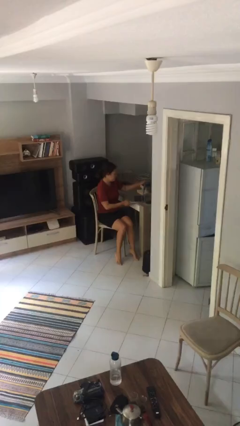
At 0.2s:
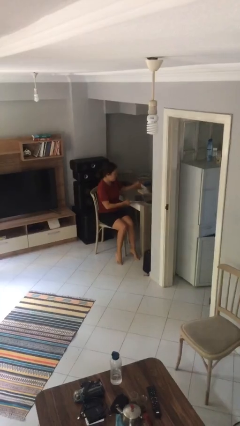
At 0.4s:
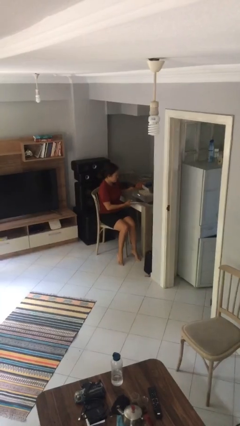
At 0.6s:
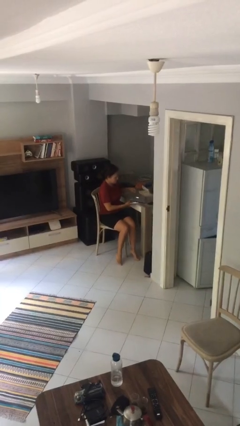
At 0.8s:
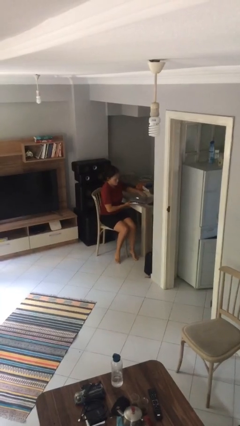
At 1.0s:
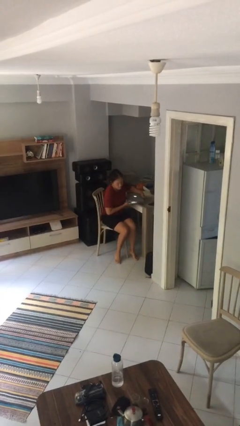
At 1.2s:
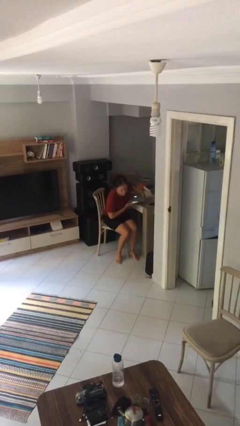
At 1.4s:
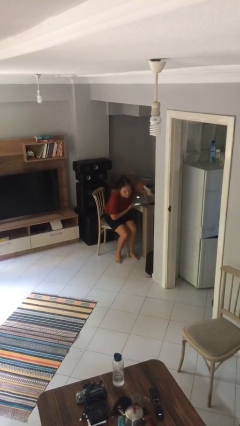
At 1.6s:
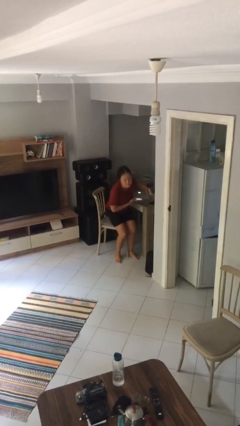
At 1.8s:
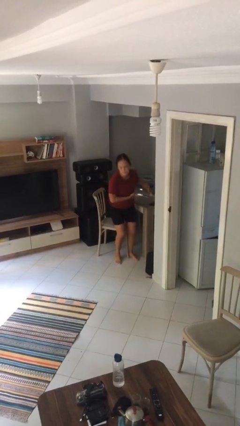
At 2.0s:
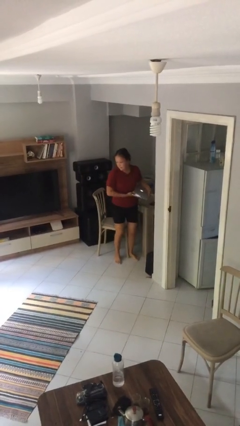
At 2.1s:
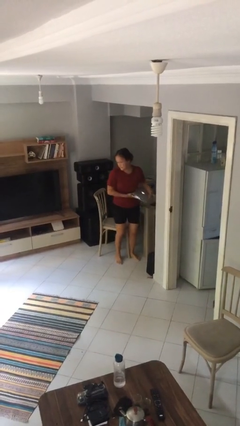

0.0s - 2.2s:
person stands up

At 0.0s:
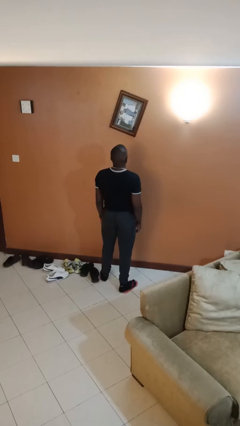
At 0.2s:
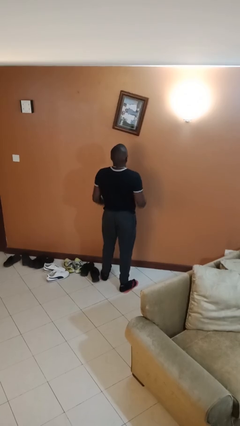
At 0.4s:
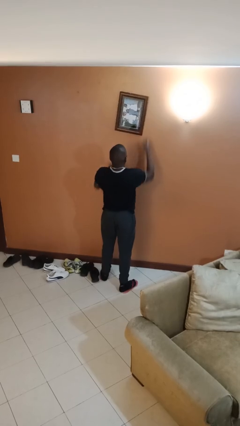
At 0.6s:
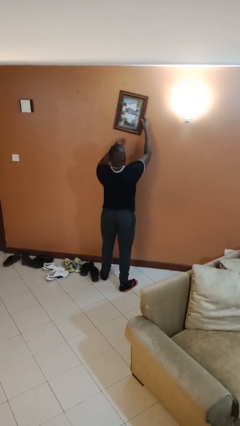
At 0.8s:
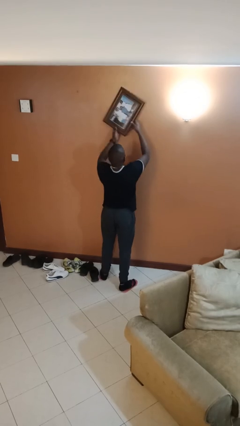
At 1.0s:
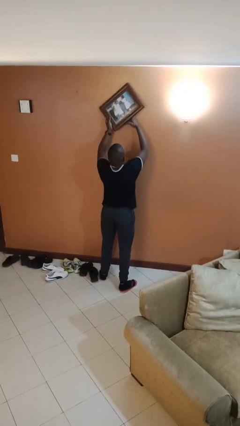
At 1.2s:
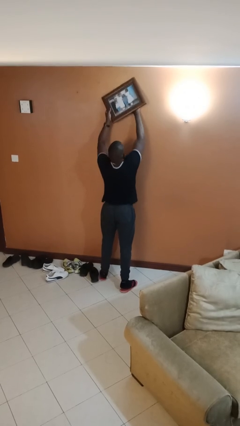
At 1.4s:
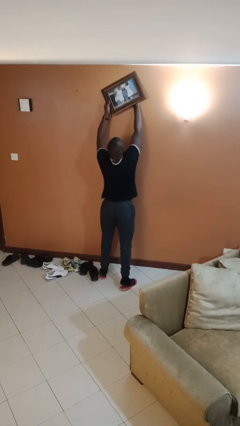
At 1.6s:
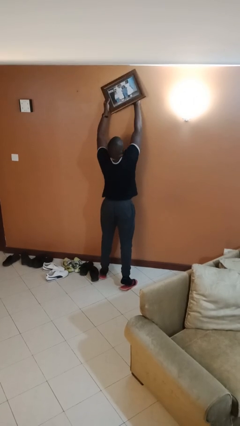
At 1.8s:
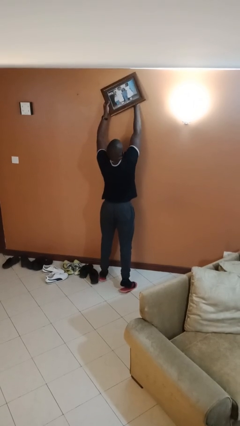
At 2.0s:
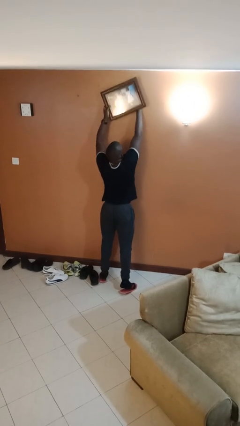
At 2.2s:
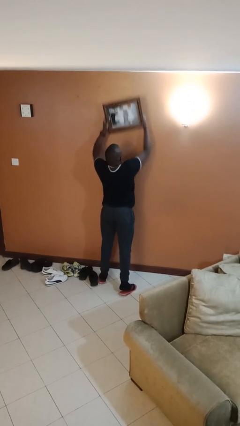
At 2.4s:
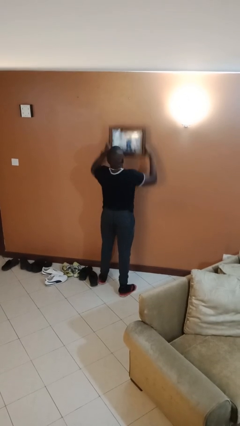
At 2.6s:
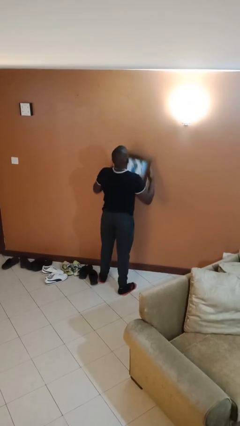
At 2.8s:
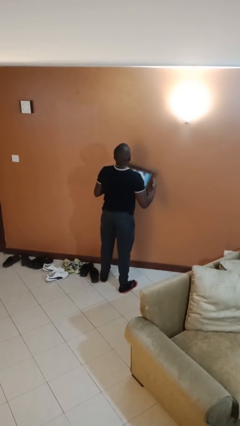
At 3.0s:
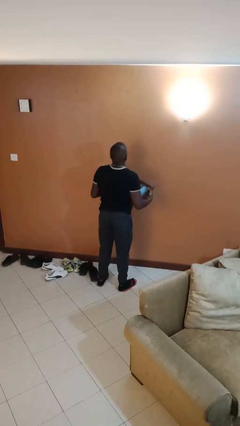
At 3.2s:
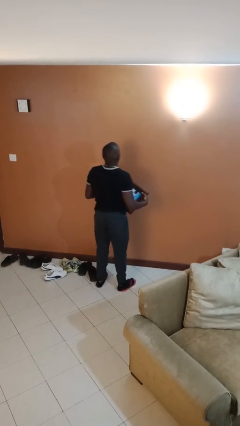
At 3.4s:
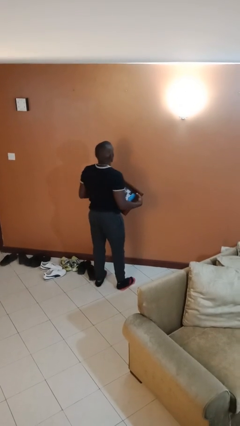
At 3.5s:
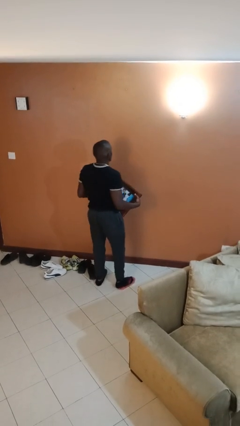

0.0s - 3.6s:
person takes down picture frame

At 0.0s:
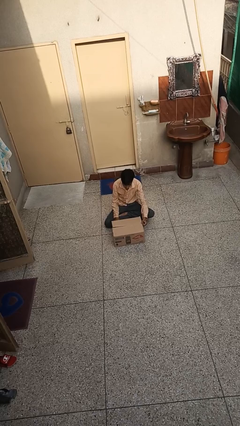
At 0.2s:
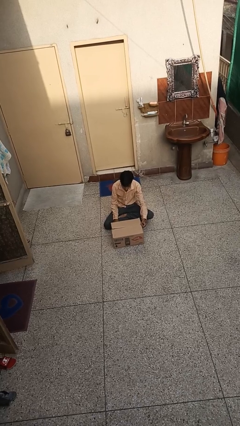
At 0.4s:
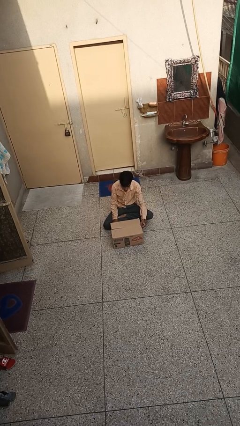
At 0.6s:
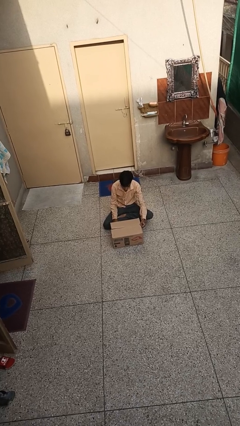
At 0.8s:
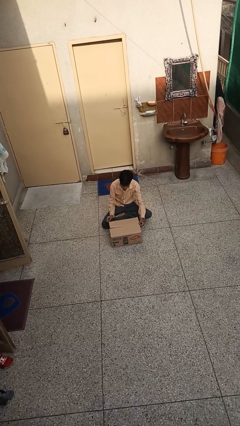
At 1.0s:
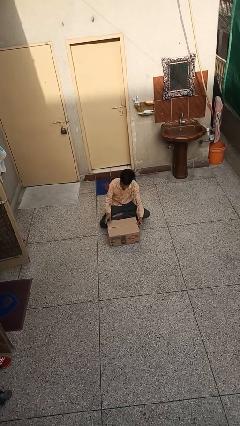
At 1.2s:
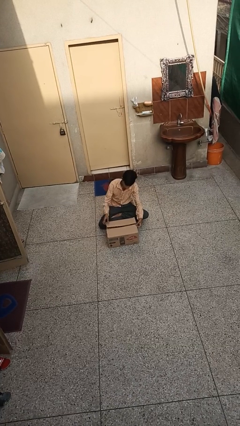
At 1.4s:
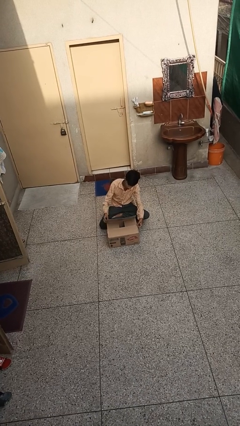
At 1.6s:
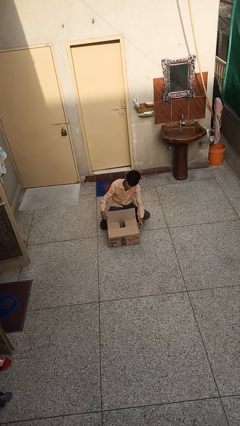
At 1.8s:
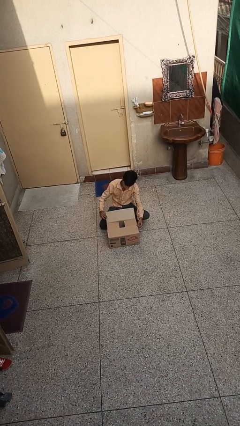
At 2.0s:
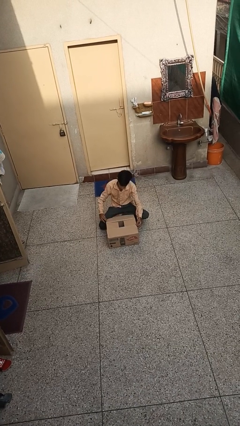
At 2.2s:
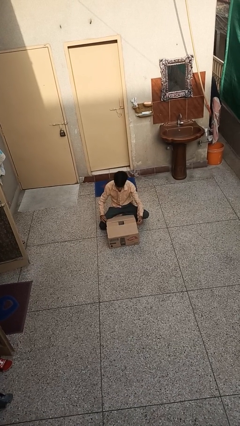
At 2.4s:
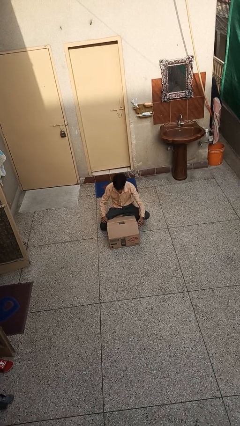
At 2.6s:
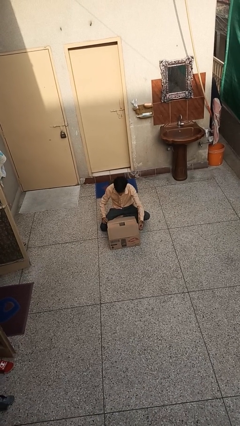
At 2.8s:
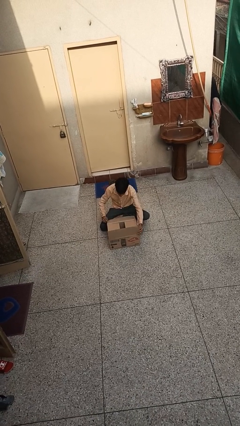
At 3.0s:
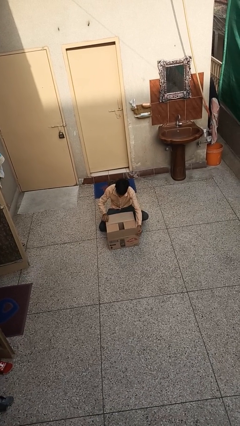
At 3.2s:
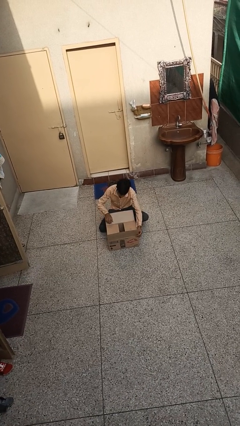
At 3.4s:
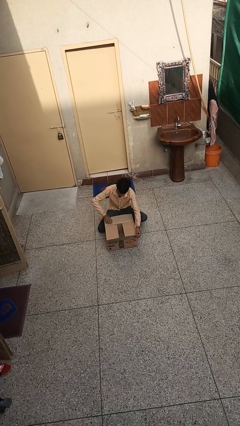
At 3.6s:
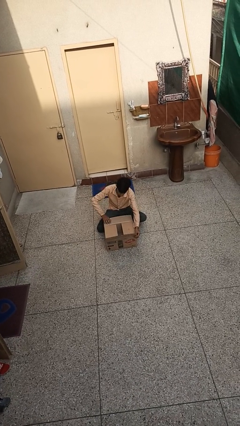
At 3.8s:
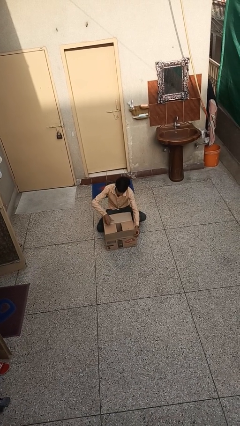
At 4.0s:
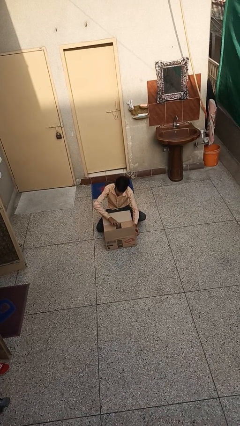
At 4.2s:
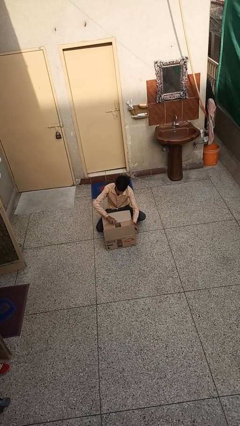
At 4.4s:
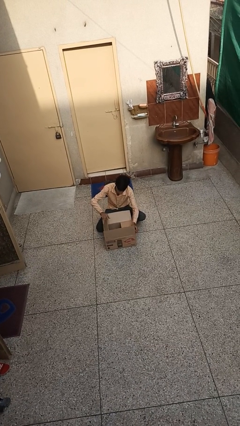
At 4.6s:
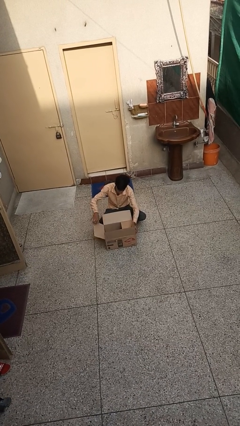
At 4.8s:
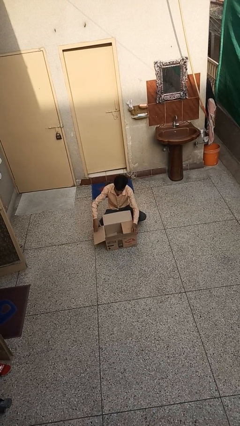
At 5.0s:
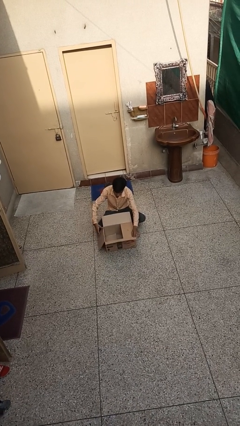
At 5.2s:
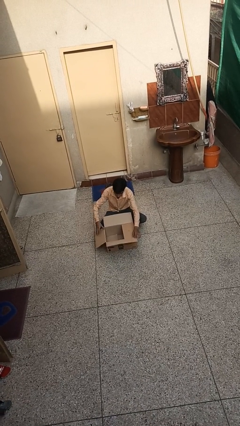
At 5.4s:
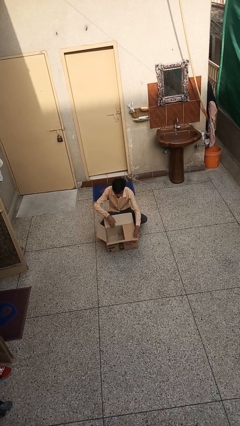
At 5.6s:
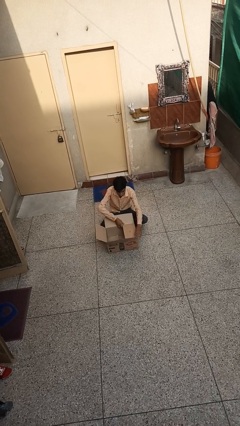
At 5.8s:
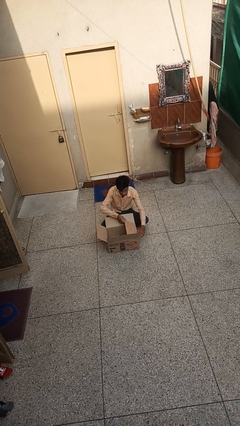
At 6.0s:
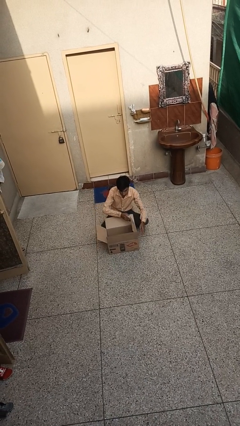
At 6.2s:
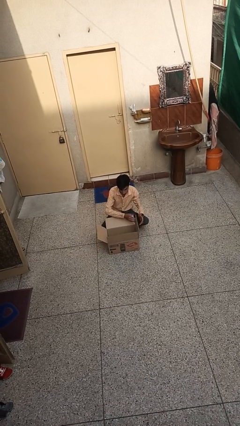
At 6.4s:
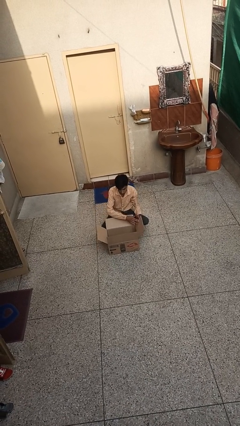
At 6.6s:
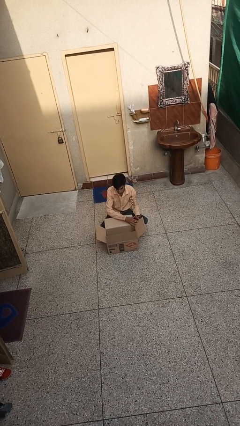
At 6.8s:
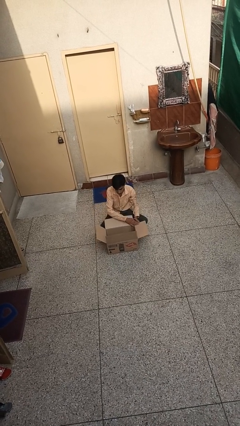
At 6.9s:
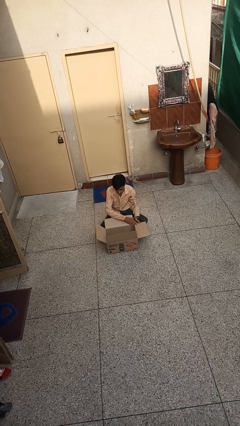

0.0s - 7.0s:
person opens box

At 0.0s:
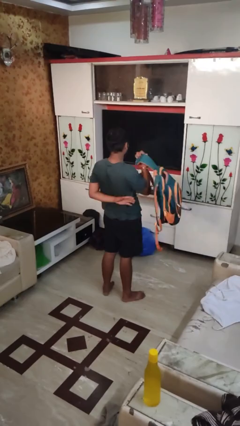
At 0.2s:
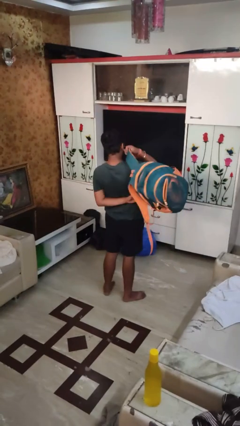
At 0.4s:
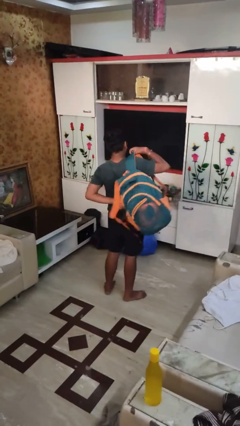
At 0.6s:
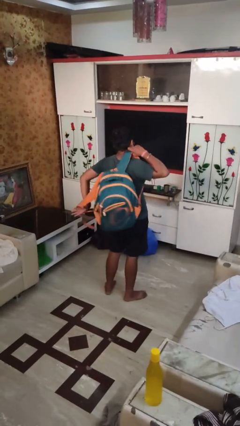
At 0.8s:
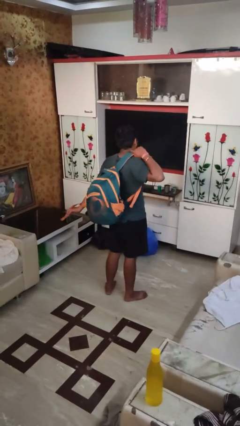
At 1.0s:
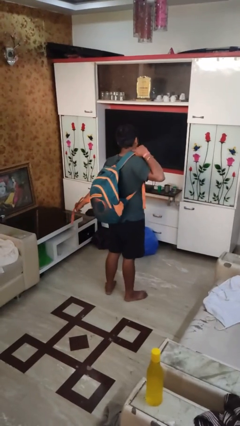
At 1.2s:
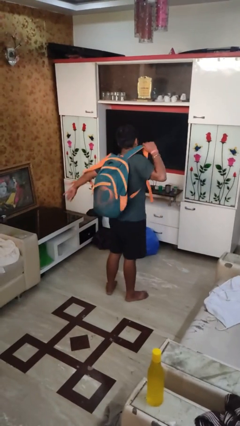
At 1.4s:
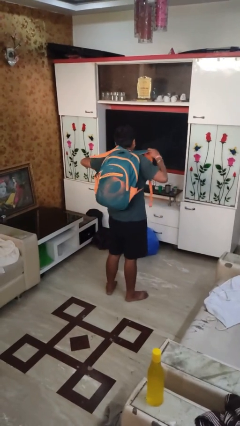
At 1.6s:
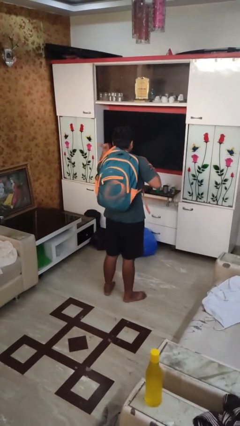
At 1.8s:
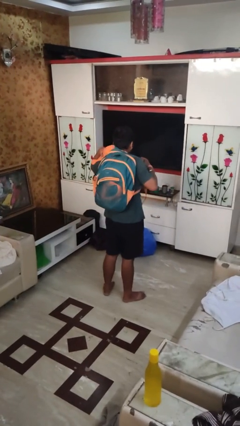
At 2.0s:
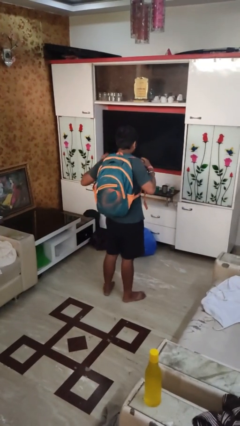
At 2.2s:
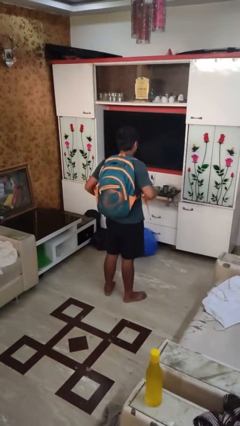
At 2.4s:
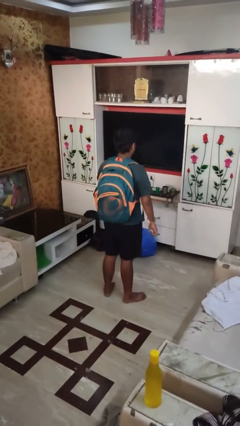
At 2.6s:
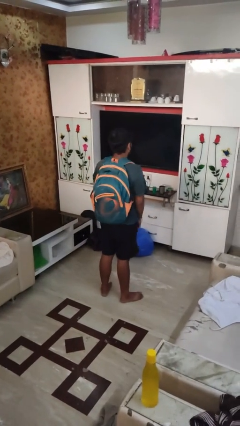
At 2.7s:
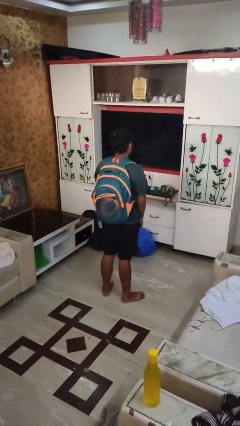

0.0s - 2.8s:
person puts on backpack

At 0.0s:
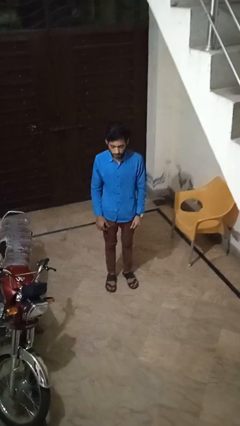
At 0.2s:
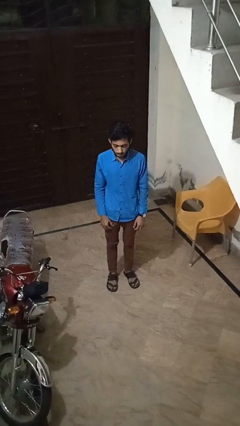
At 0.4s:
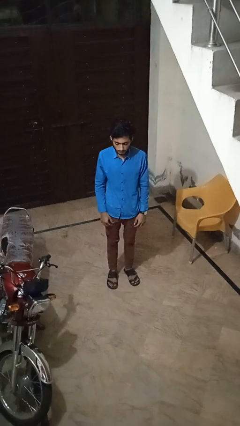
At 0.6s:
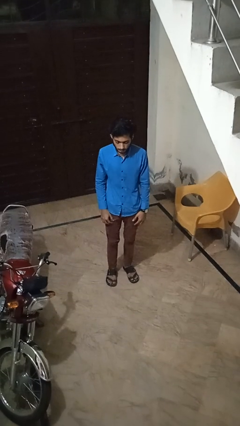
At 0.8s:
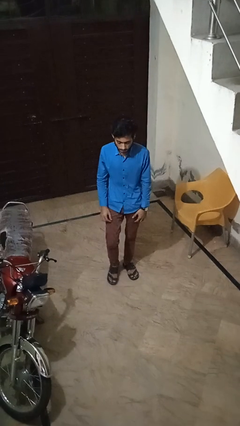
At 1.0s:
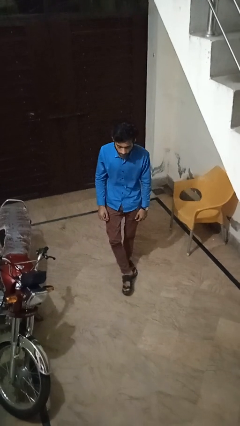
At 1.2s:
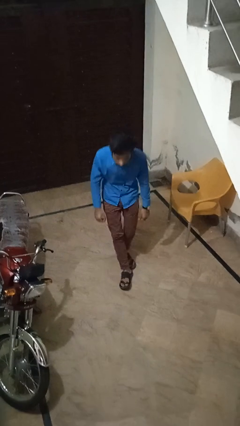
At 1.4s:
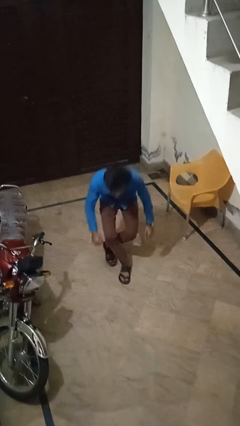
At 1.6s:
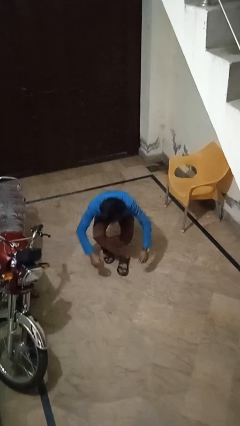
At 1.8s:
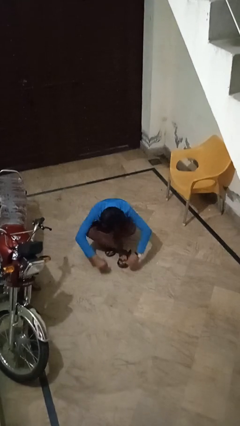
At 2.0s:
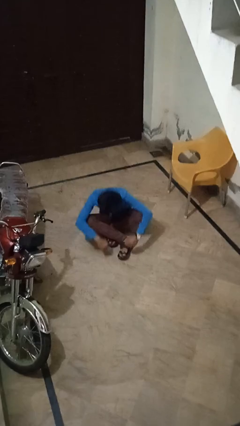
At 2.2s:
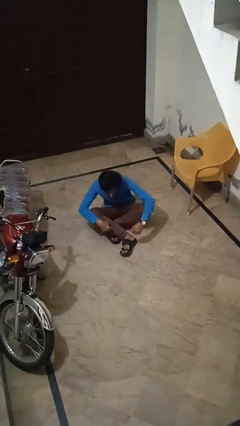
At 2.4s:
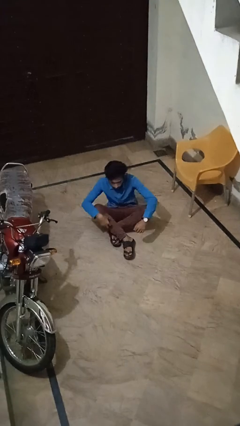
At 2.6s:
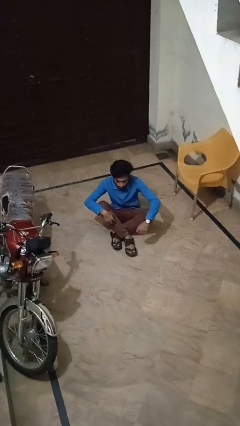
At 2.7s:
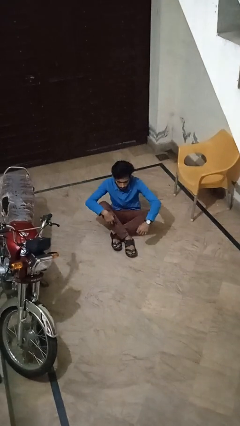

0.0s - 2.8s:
person sits crisscross
